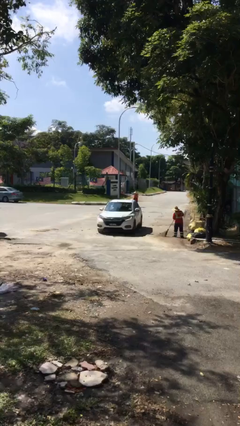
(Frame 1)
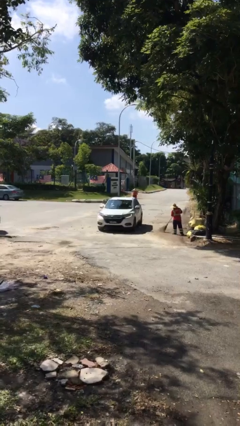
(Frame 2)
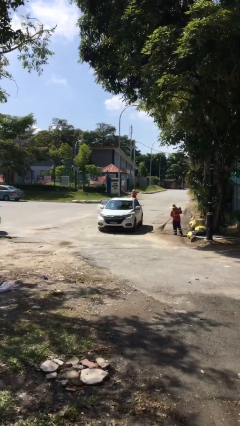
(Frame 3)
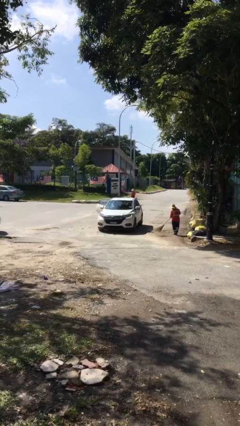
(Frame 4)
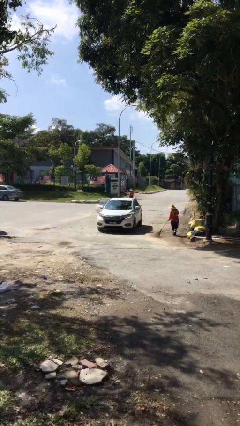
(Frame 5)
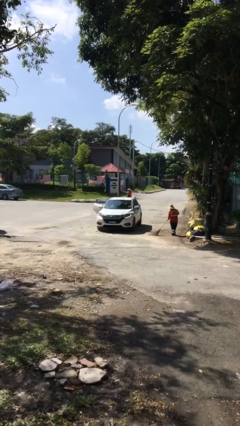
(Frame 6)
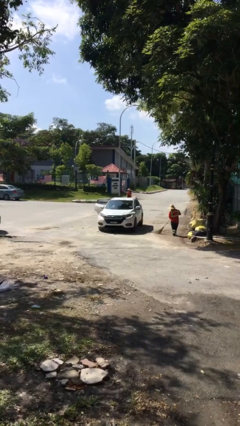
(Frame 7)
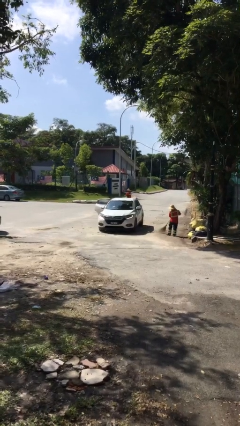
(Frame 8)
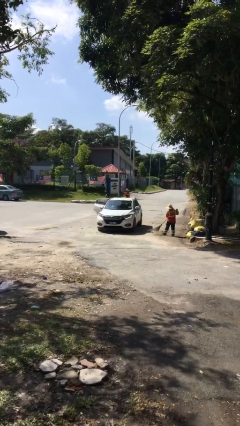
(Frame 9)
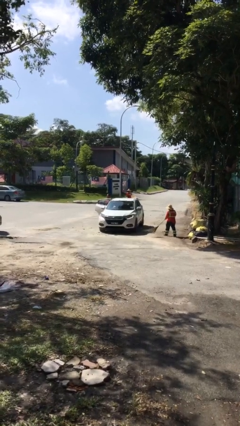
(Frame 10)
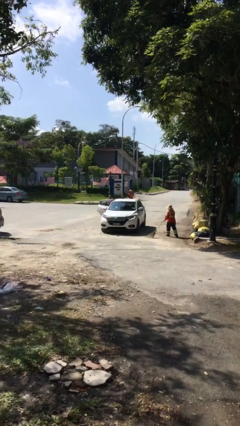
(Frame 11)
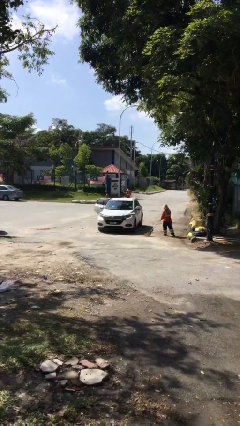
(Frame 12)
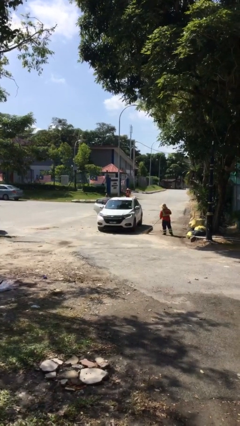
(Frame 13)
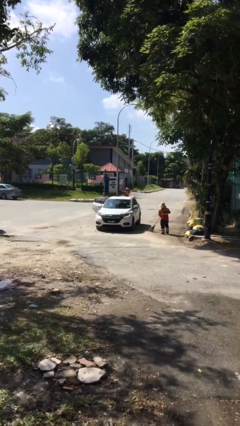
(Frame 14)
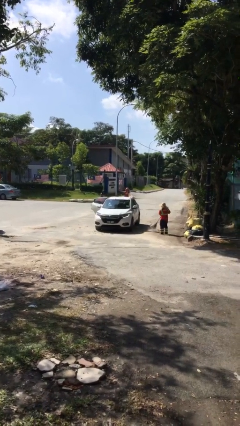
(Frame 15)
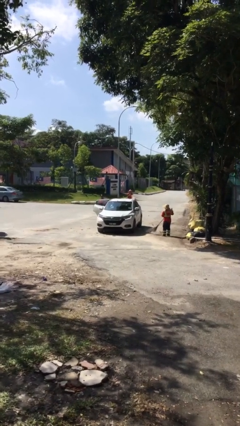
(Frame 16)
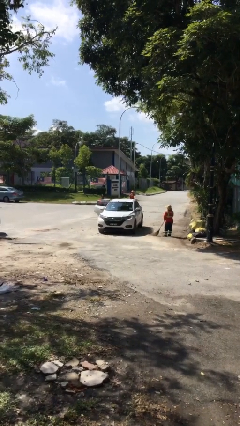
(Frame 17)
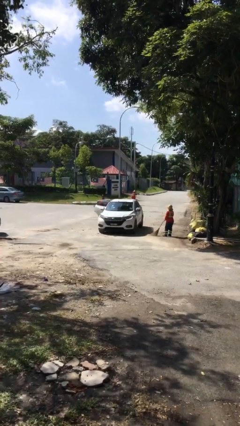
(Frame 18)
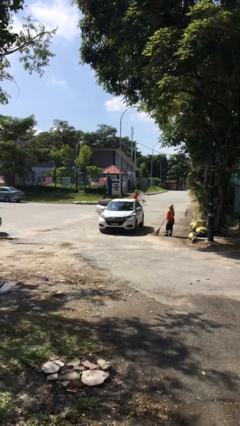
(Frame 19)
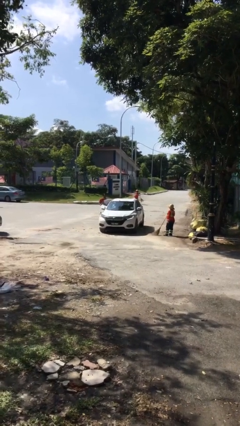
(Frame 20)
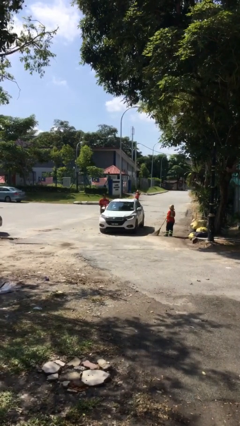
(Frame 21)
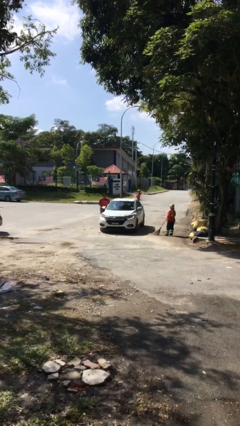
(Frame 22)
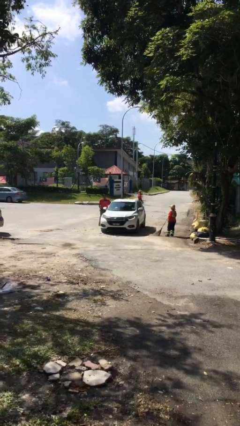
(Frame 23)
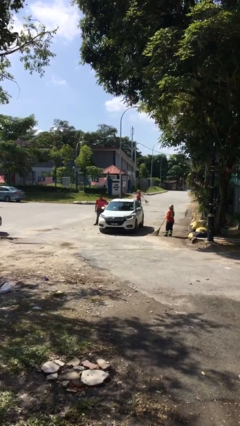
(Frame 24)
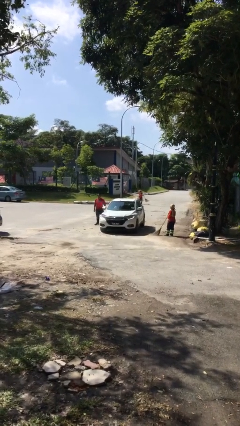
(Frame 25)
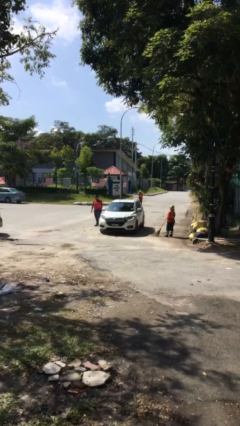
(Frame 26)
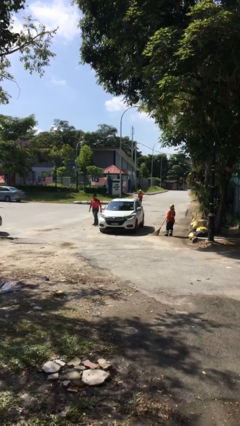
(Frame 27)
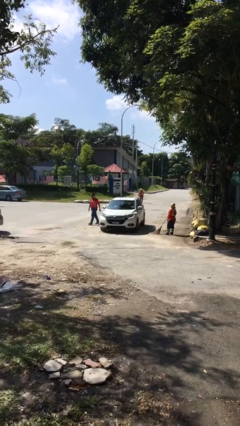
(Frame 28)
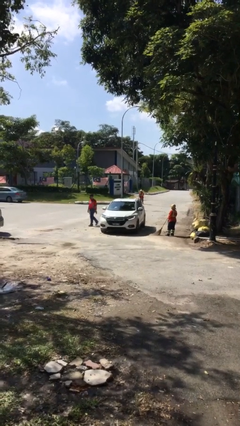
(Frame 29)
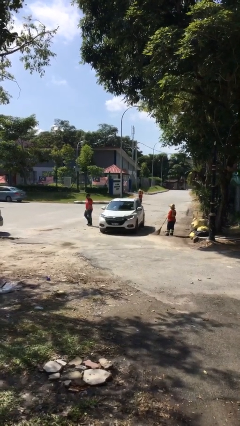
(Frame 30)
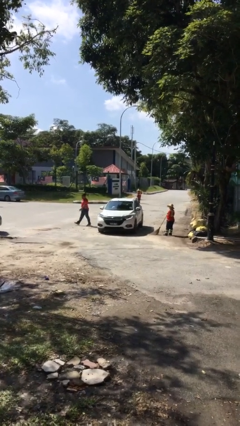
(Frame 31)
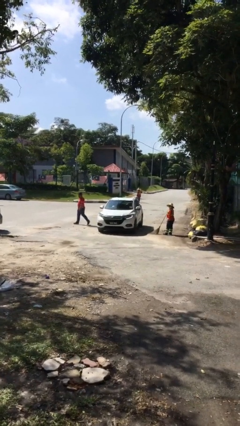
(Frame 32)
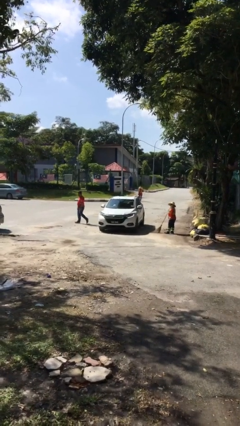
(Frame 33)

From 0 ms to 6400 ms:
car drops off person

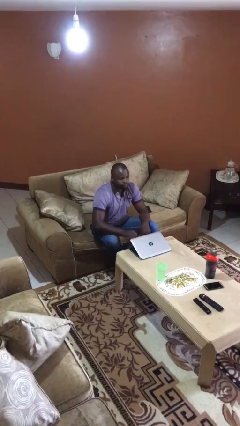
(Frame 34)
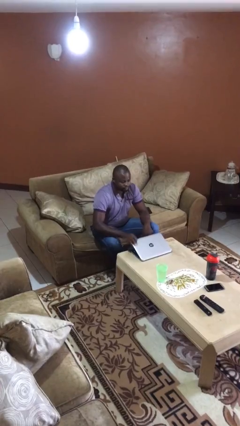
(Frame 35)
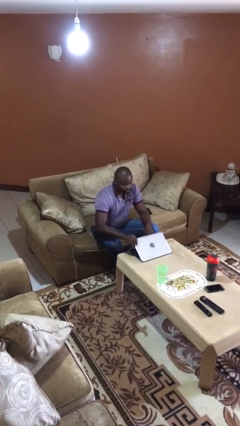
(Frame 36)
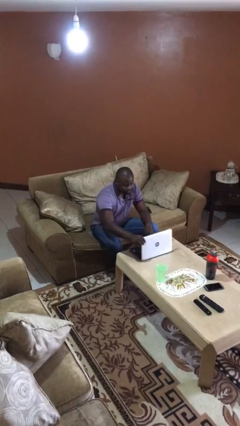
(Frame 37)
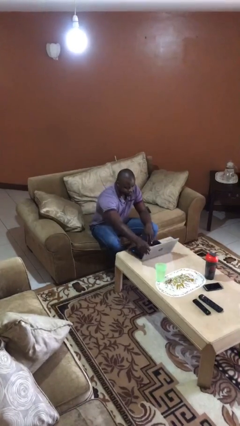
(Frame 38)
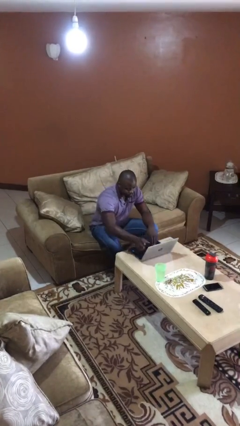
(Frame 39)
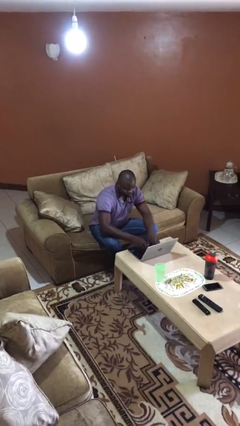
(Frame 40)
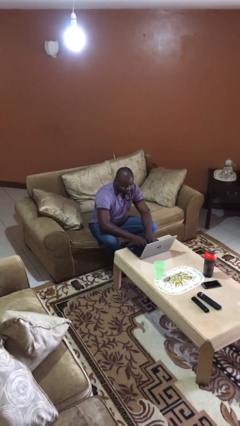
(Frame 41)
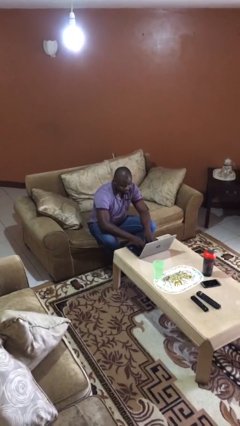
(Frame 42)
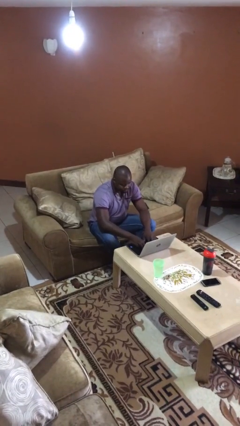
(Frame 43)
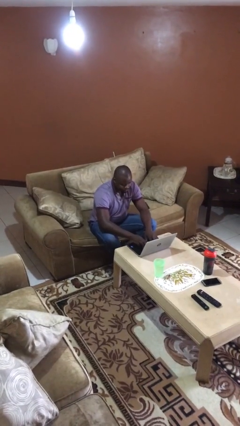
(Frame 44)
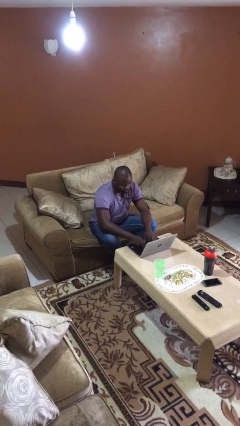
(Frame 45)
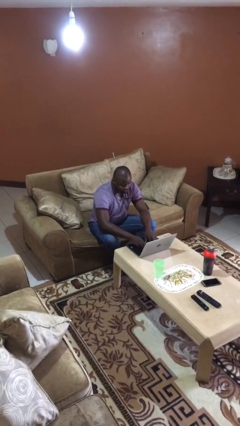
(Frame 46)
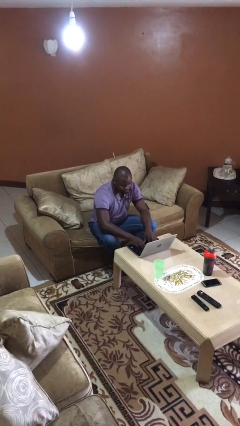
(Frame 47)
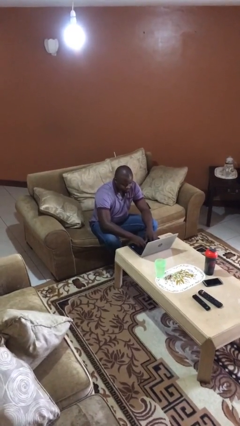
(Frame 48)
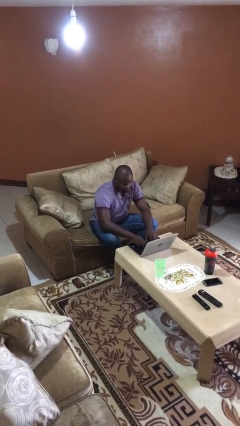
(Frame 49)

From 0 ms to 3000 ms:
person interacts with laptop

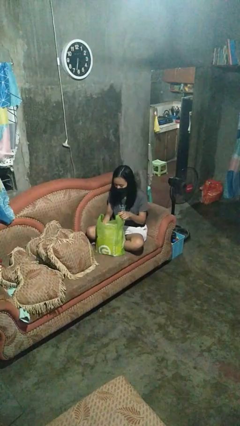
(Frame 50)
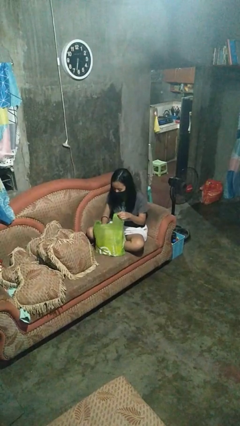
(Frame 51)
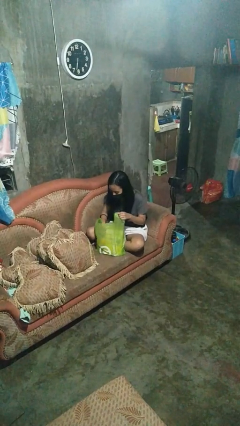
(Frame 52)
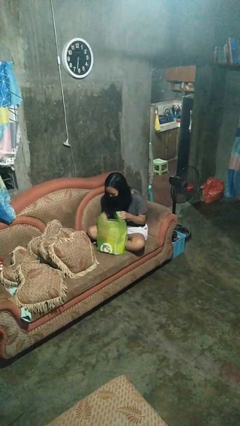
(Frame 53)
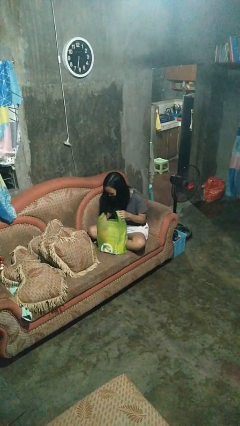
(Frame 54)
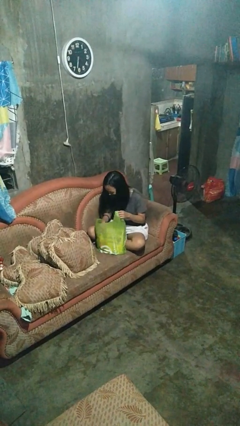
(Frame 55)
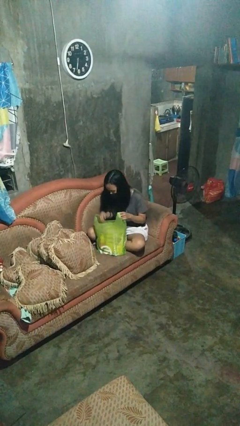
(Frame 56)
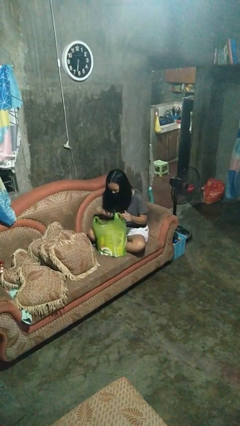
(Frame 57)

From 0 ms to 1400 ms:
person searches in bag

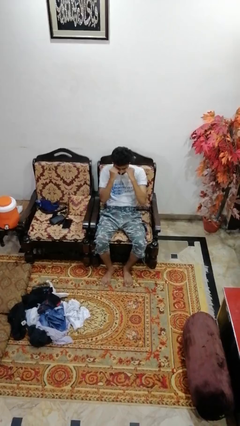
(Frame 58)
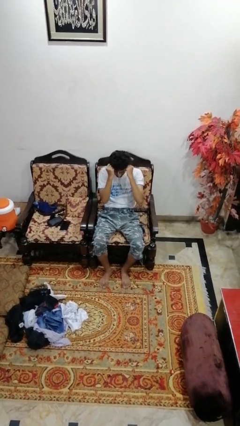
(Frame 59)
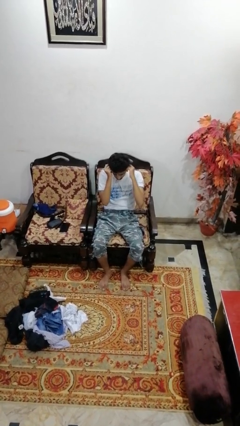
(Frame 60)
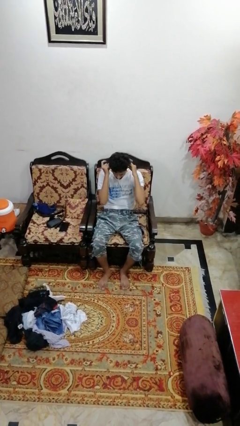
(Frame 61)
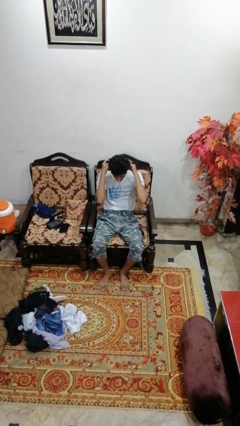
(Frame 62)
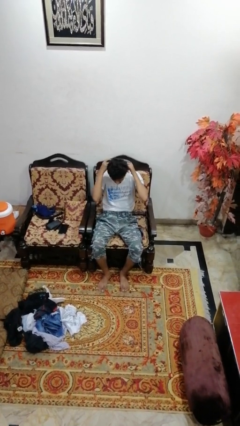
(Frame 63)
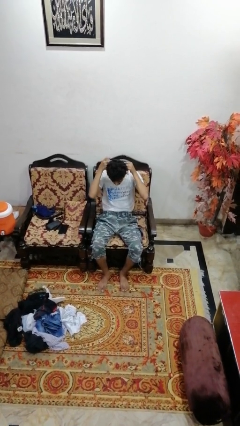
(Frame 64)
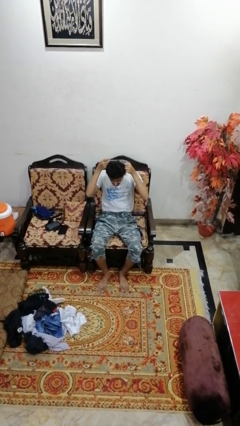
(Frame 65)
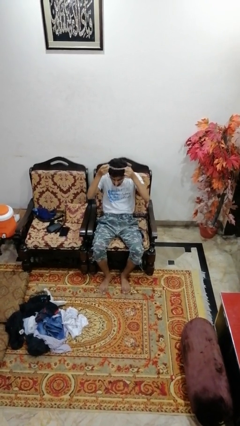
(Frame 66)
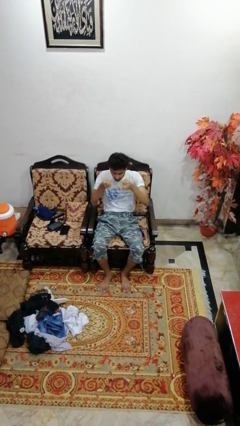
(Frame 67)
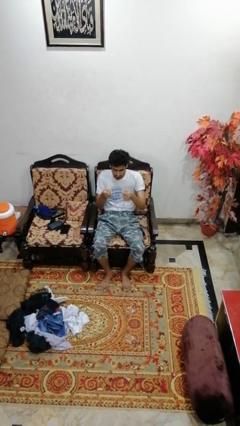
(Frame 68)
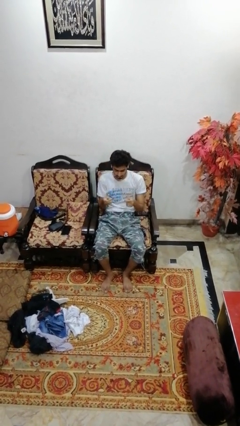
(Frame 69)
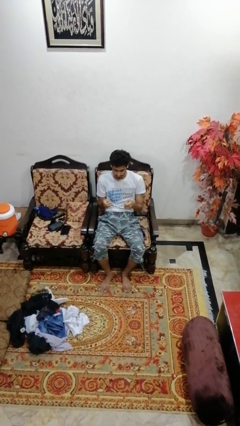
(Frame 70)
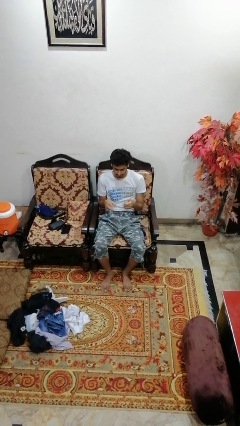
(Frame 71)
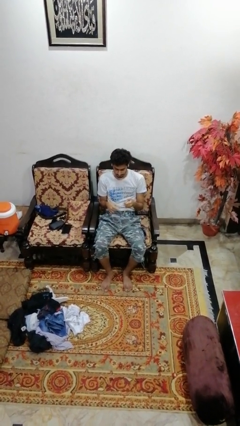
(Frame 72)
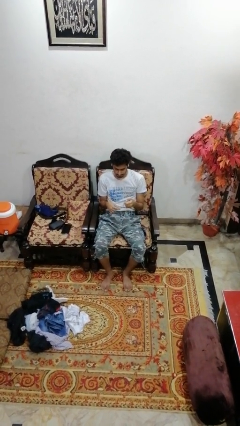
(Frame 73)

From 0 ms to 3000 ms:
person takes off necklace

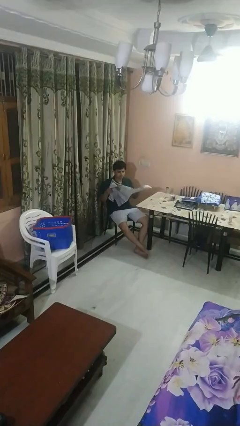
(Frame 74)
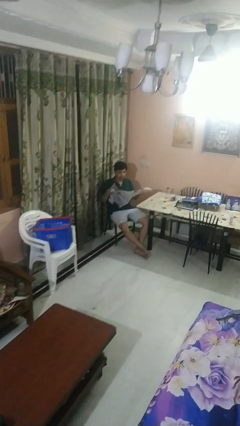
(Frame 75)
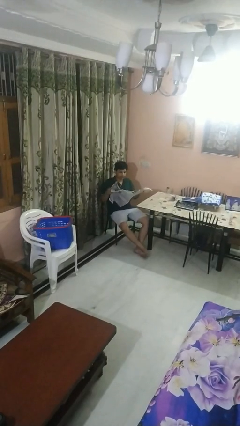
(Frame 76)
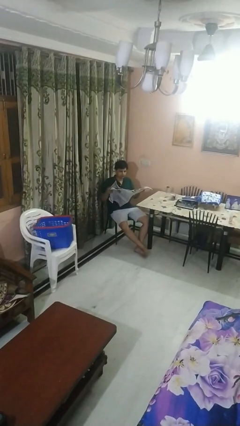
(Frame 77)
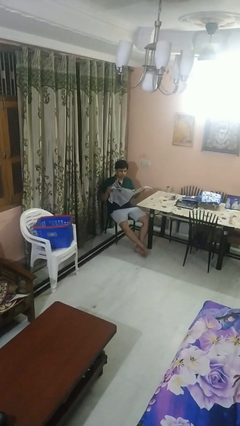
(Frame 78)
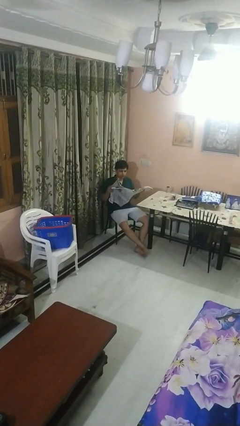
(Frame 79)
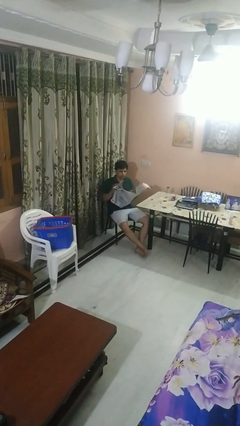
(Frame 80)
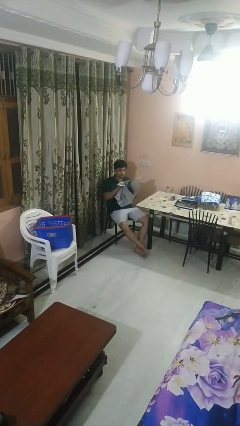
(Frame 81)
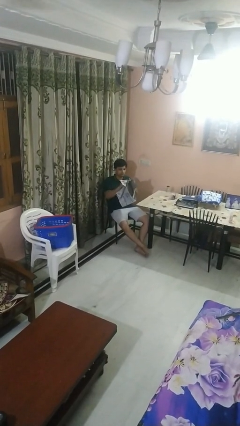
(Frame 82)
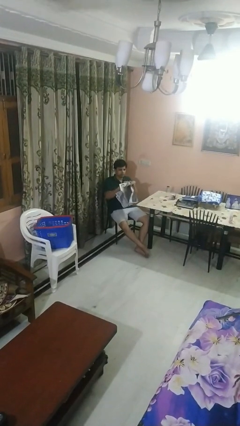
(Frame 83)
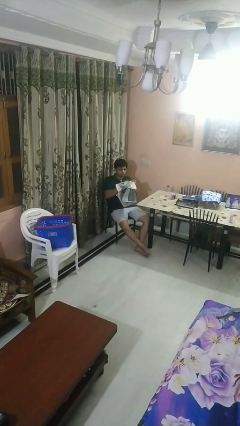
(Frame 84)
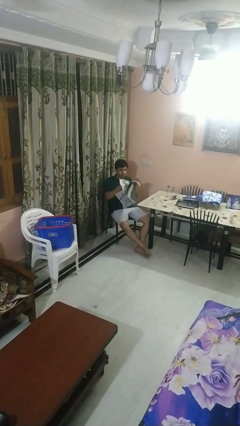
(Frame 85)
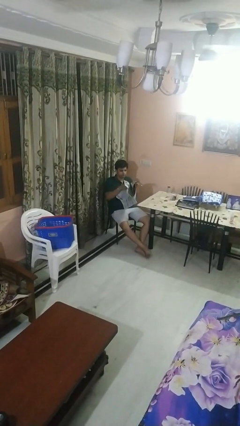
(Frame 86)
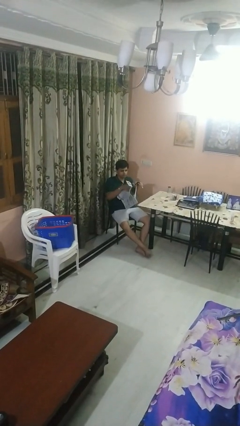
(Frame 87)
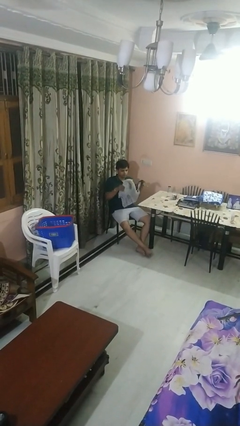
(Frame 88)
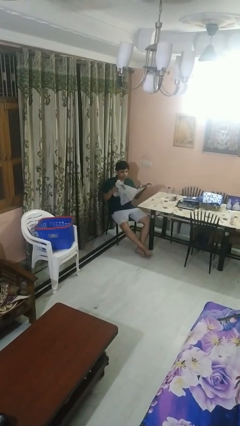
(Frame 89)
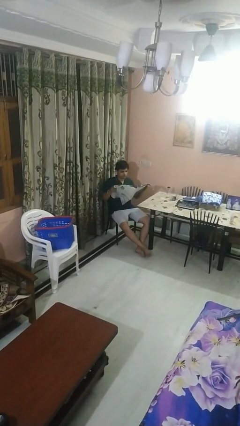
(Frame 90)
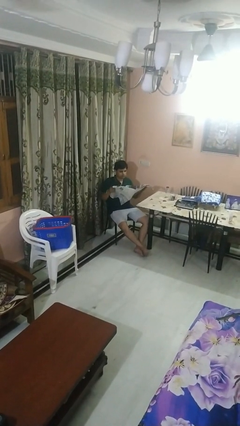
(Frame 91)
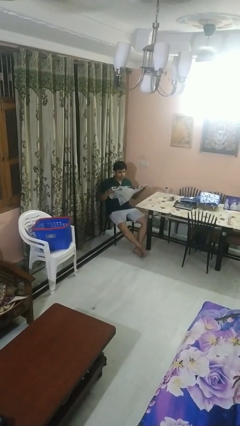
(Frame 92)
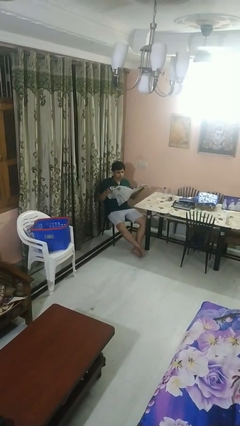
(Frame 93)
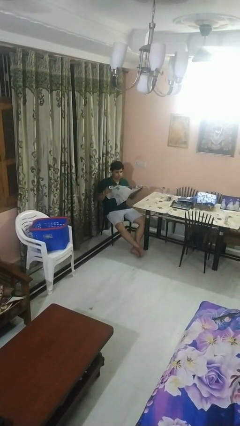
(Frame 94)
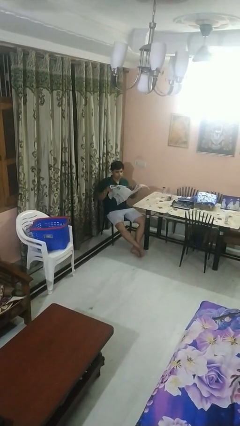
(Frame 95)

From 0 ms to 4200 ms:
person reads newspaper
